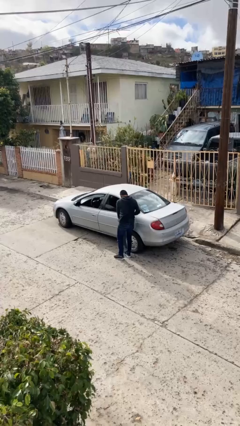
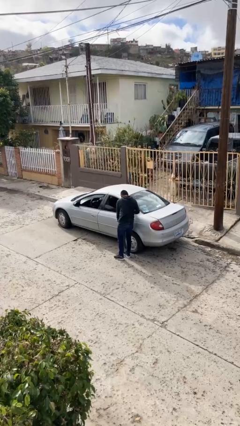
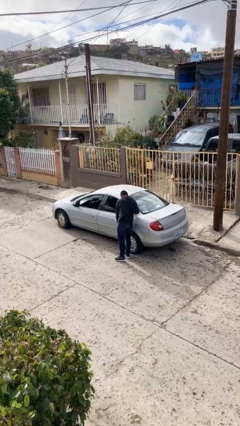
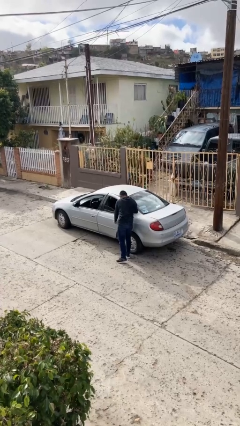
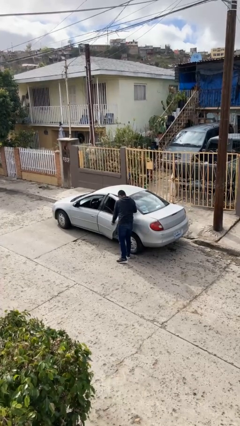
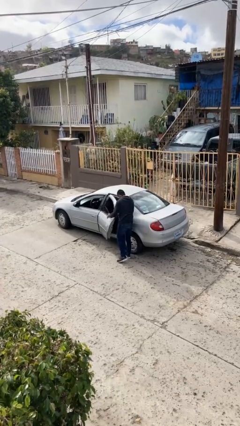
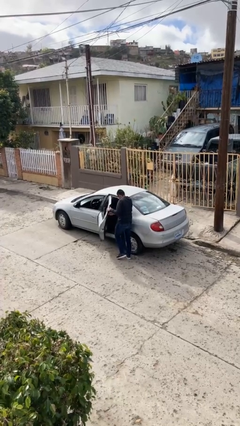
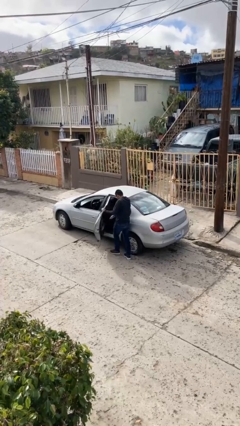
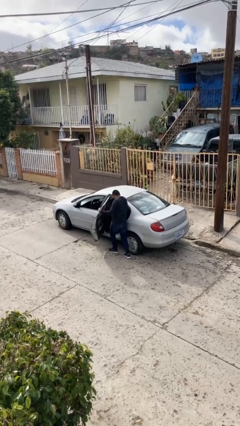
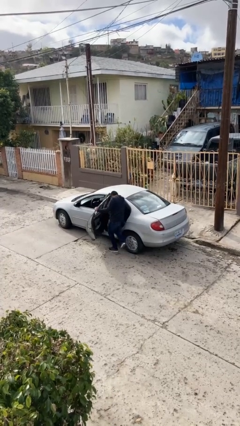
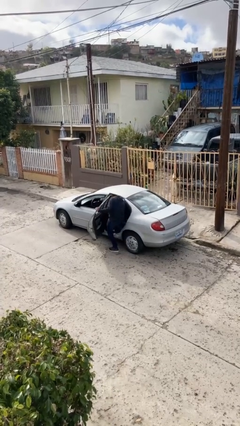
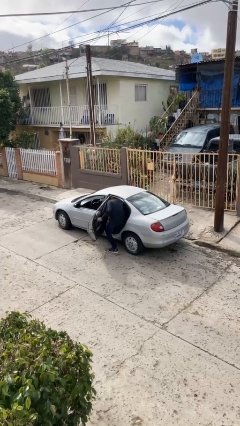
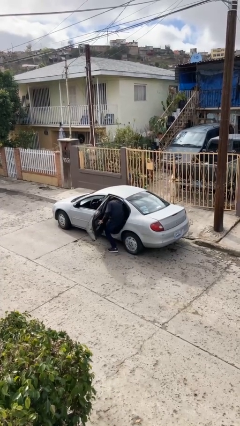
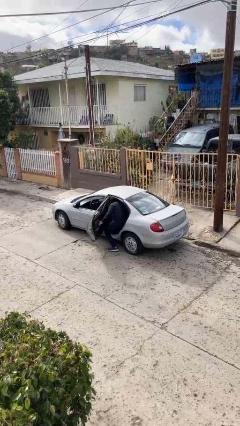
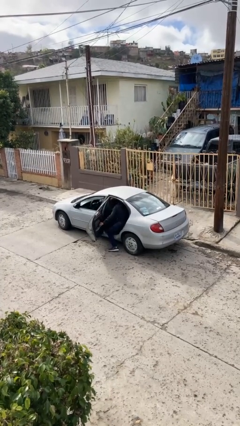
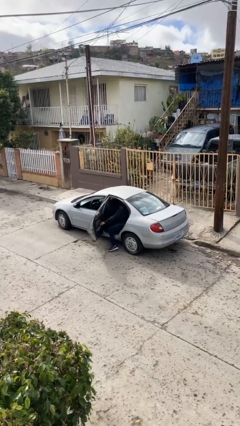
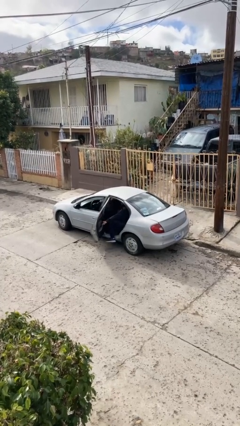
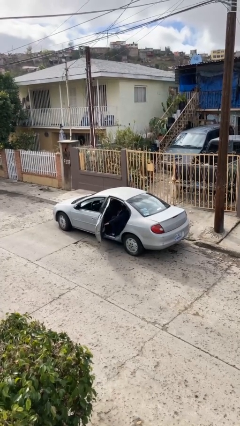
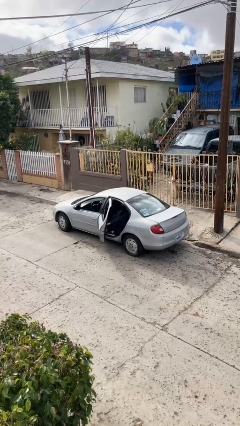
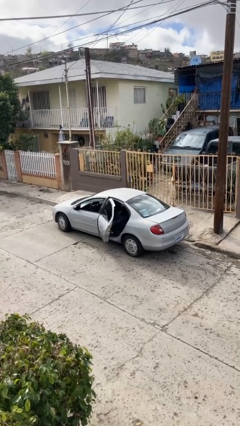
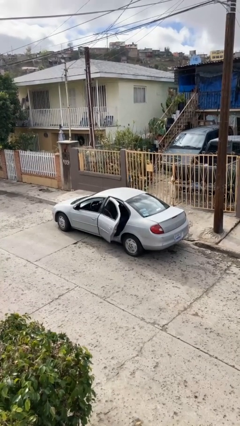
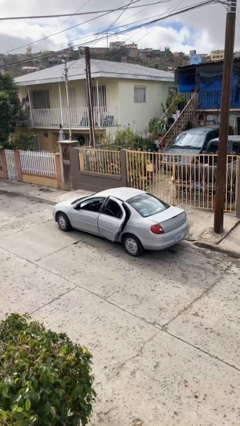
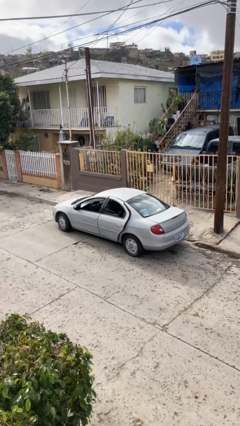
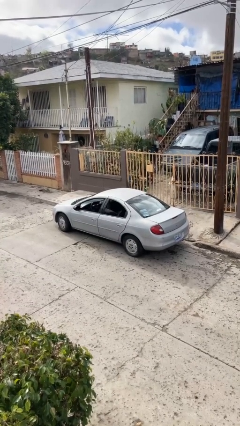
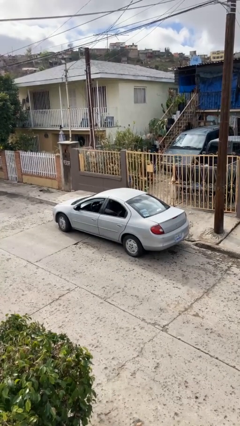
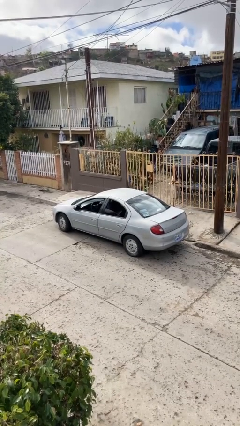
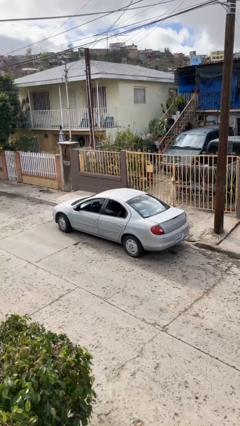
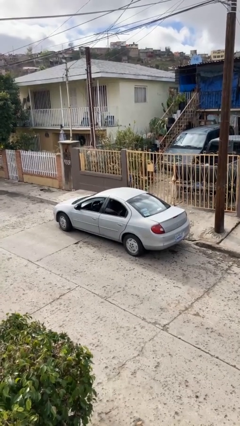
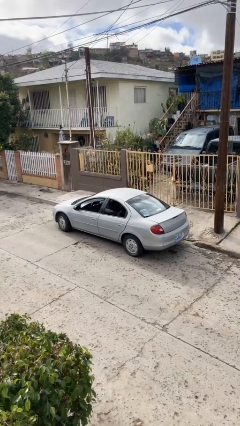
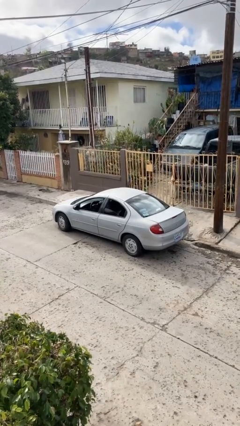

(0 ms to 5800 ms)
car picks up person

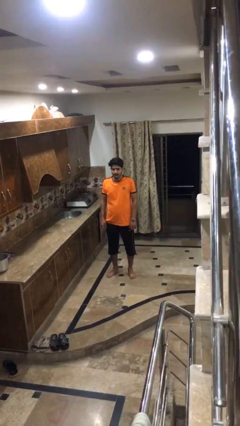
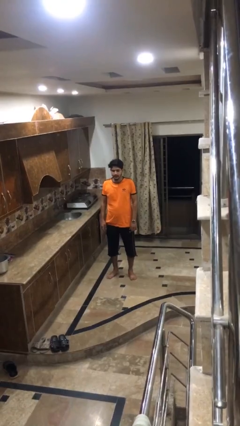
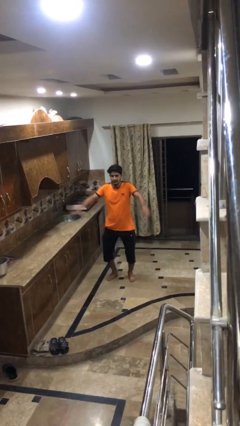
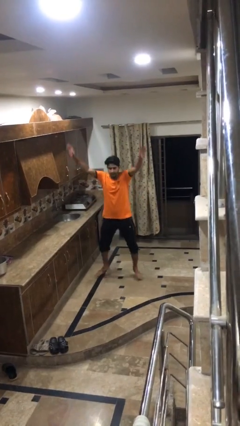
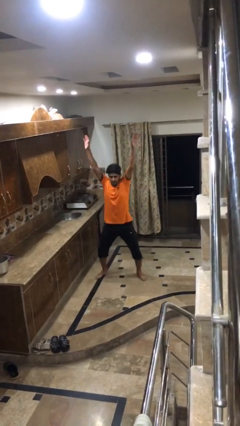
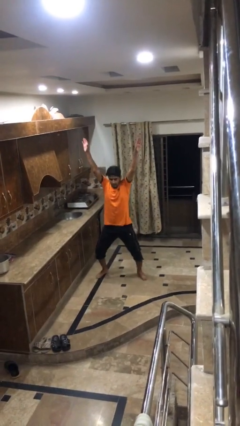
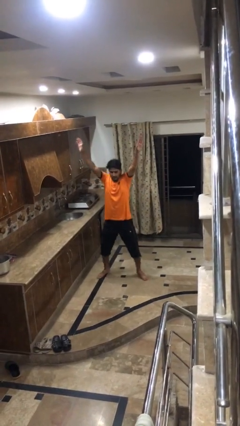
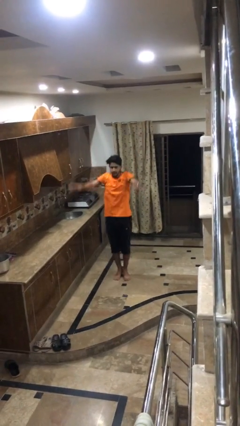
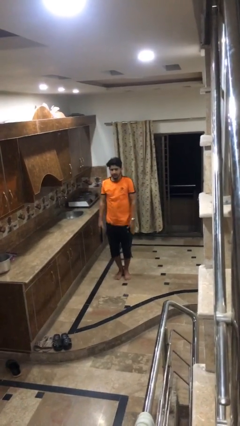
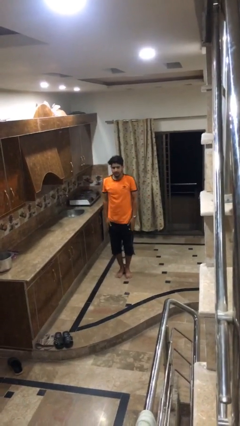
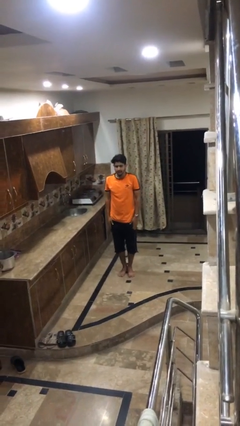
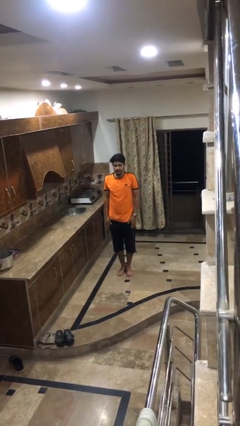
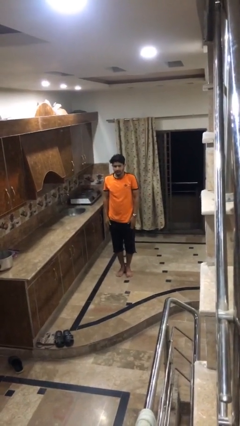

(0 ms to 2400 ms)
person exercises with jumping jacks

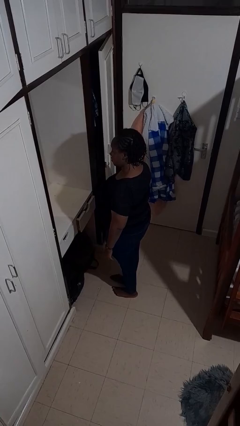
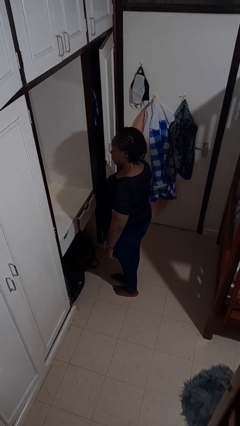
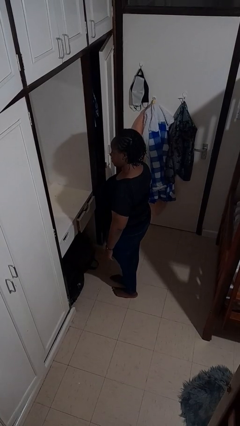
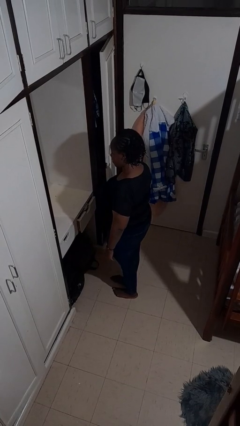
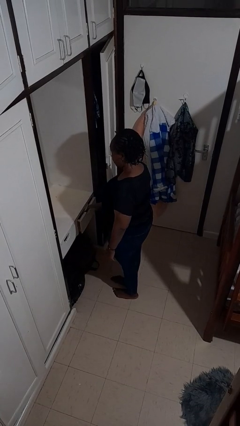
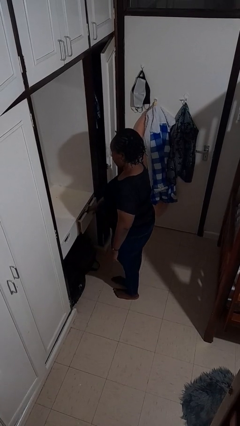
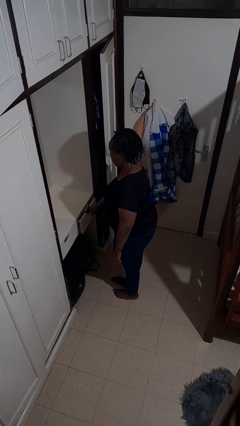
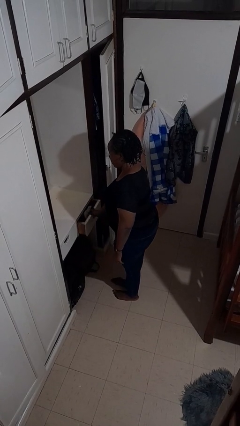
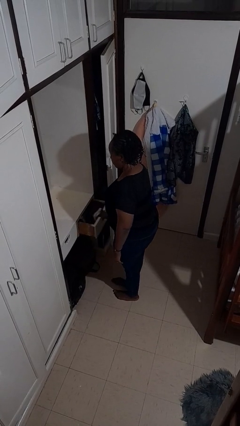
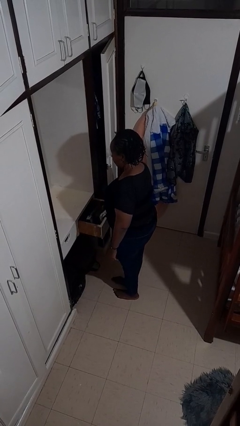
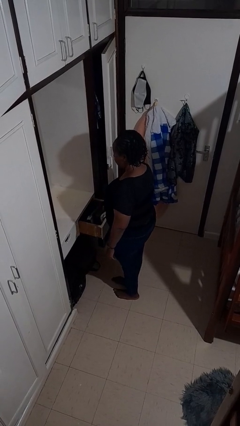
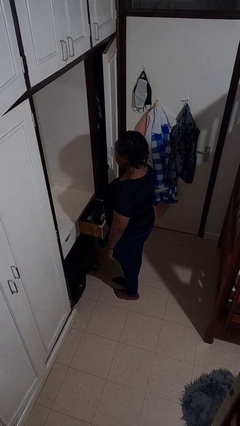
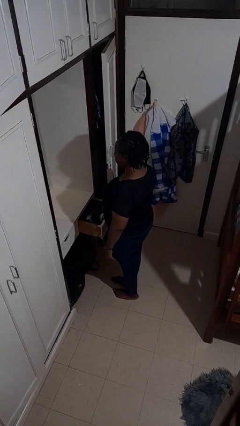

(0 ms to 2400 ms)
person opens dresser drawer

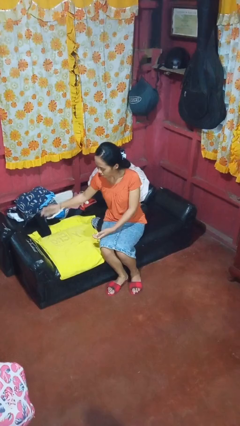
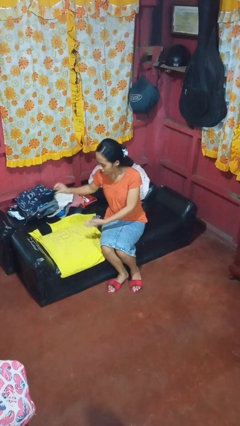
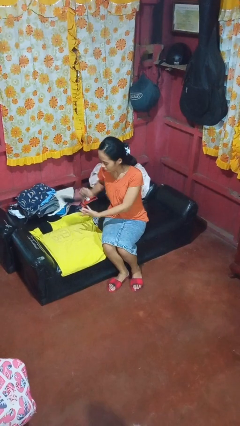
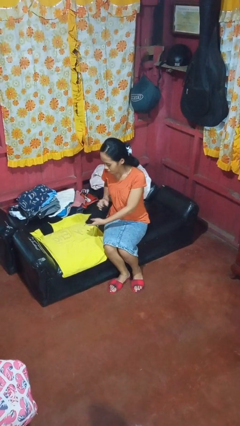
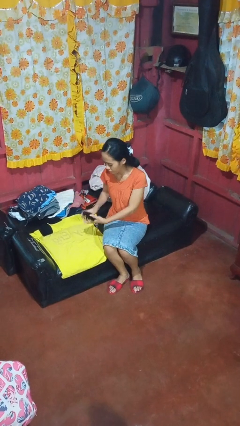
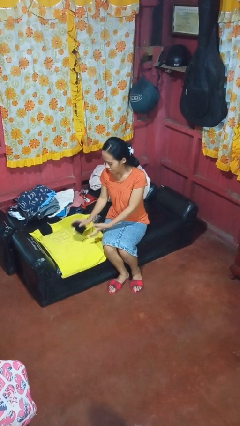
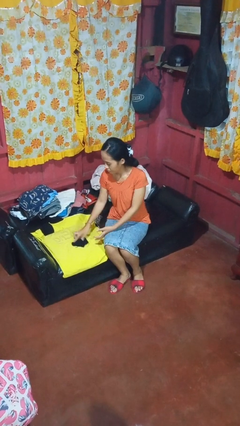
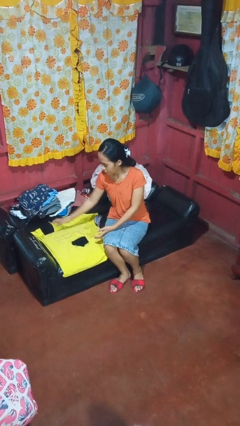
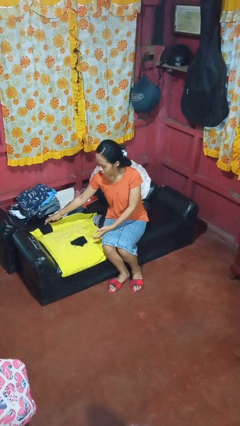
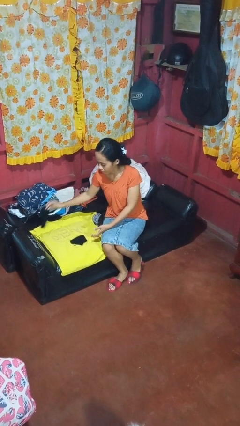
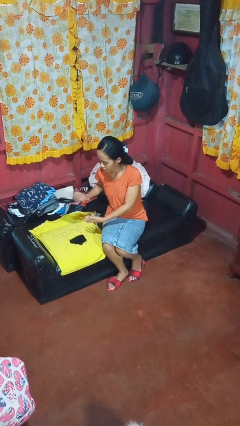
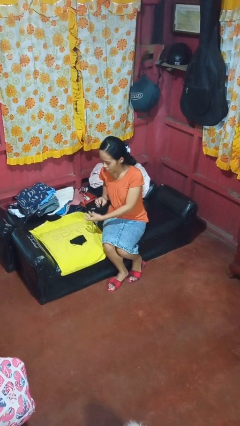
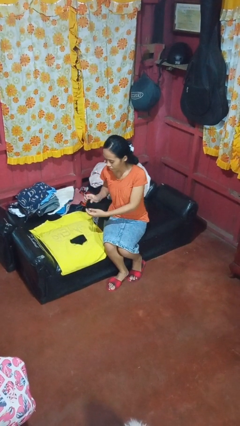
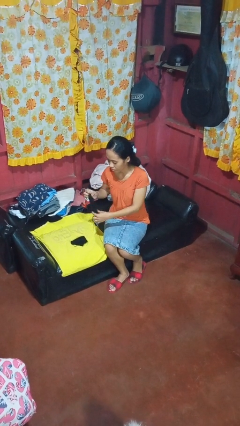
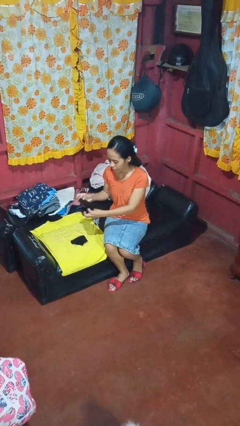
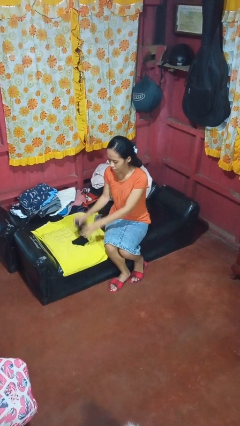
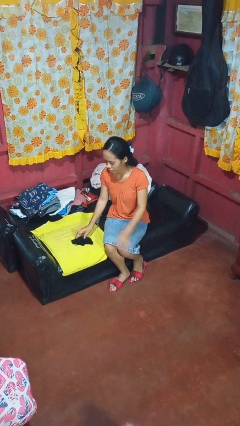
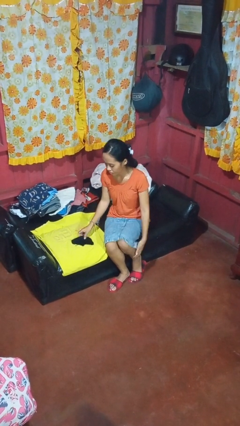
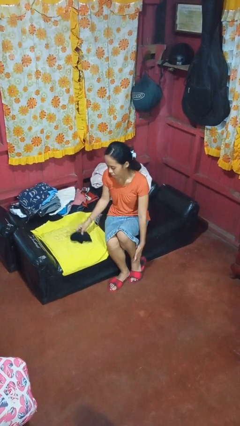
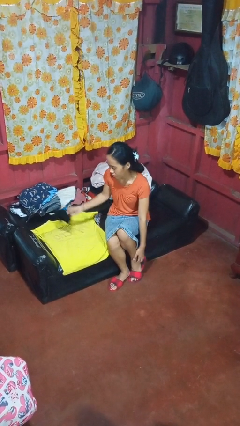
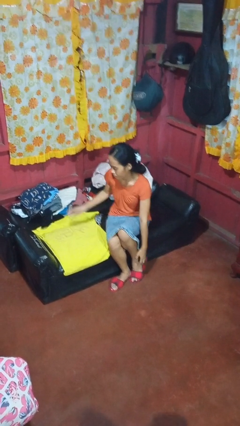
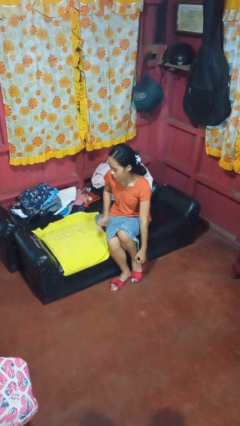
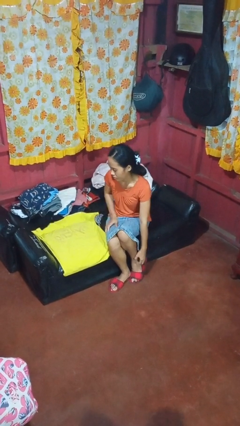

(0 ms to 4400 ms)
person folds socks

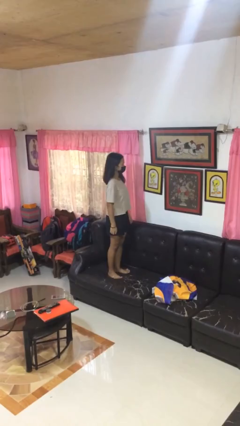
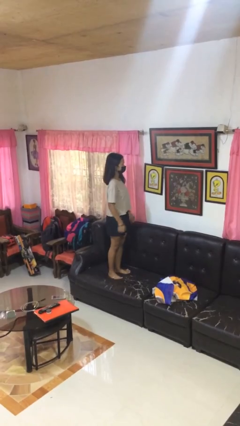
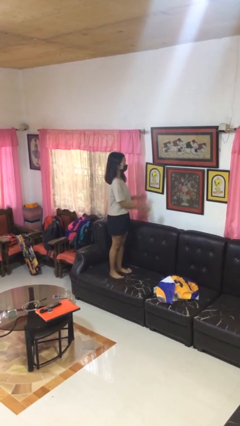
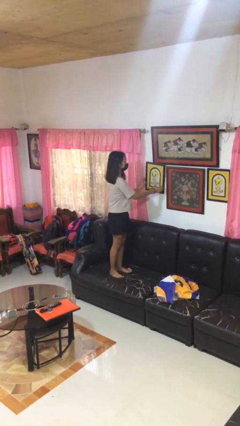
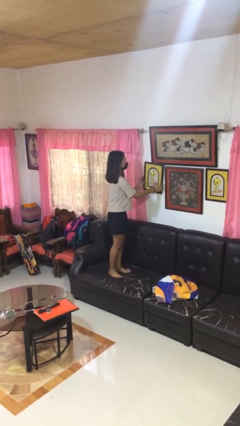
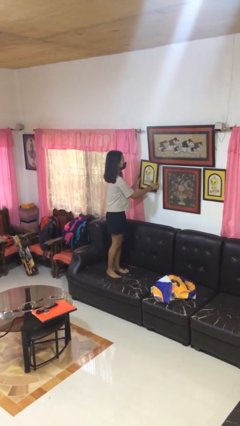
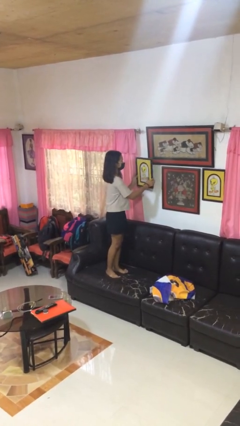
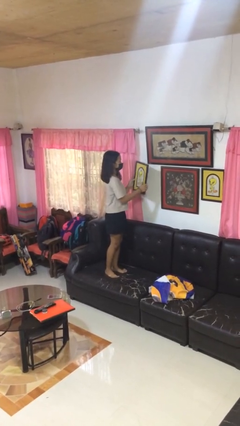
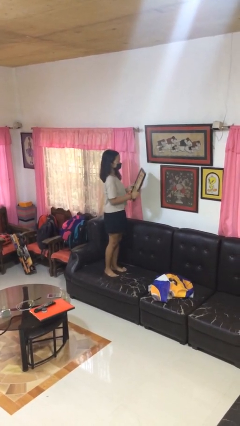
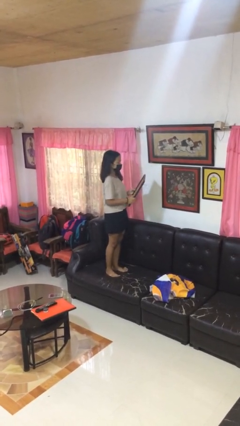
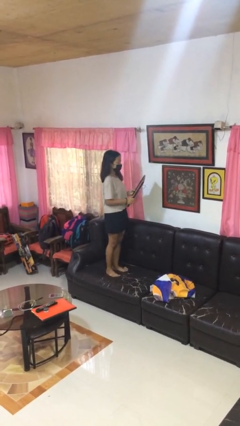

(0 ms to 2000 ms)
person takes down picture frame

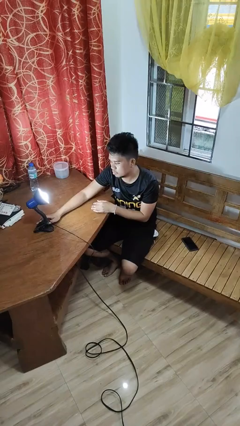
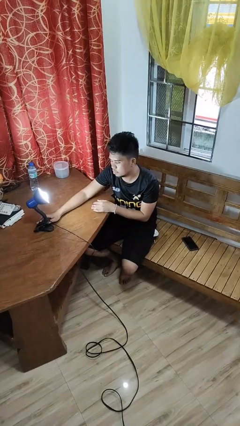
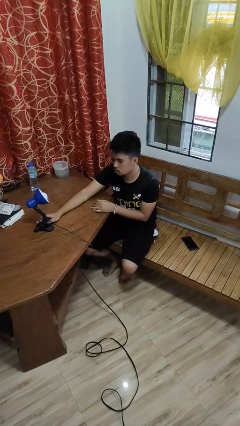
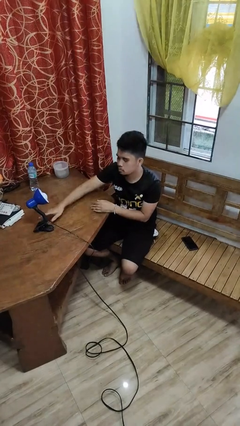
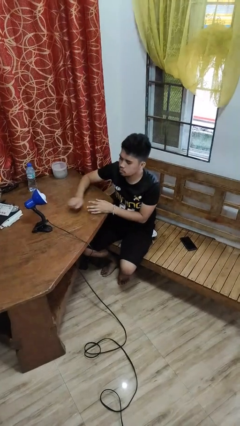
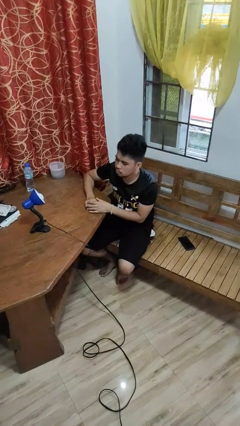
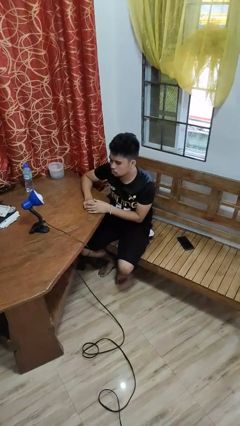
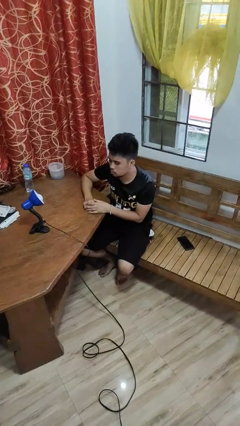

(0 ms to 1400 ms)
person turns off lamp
